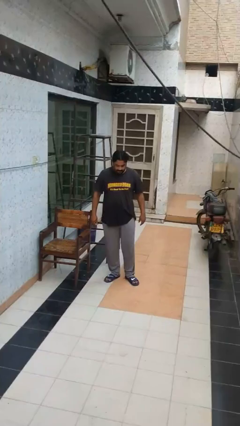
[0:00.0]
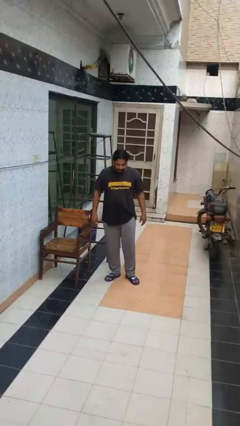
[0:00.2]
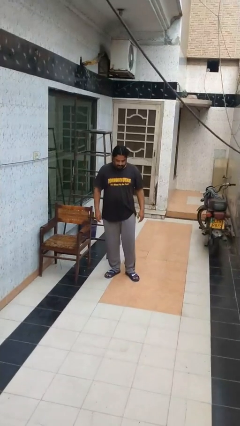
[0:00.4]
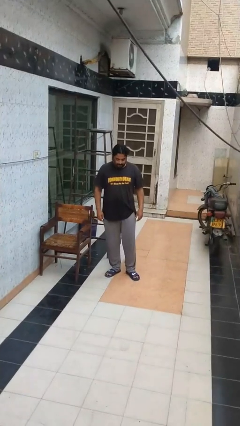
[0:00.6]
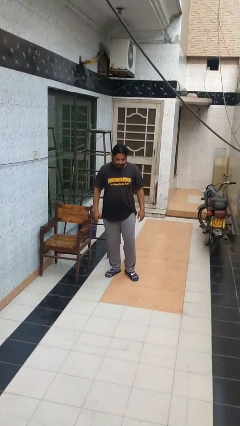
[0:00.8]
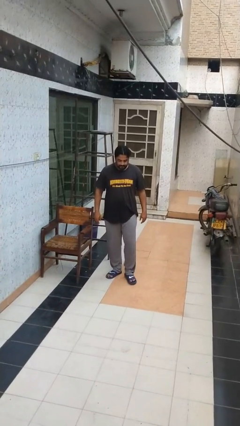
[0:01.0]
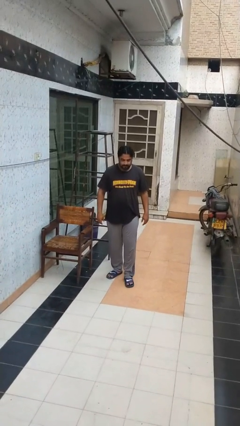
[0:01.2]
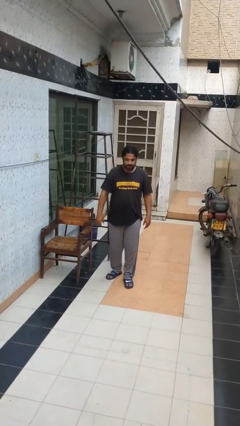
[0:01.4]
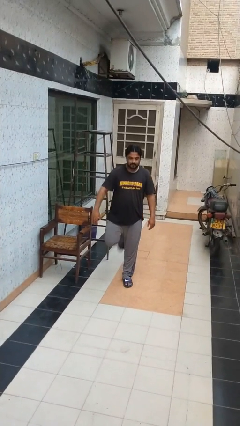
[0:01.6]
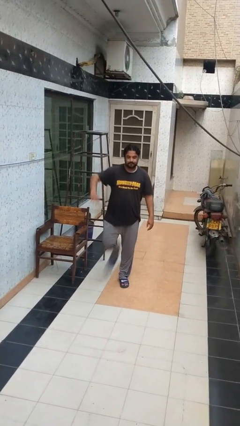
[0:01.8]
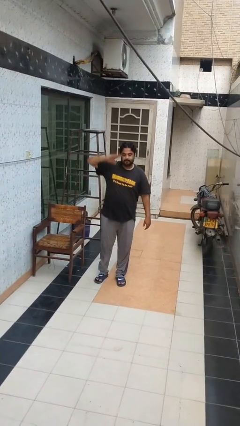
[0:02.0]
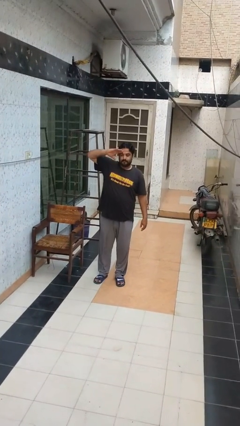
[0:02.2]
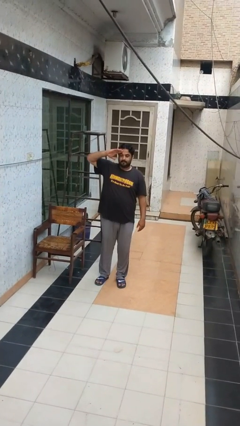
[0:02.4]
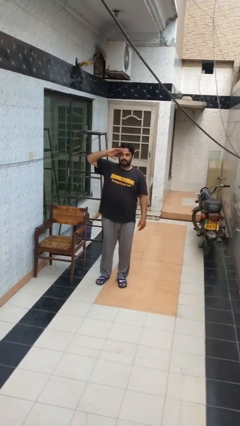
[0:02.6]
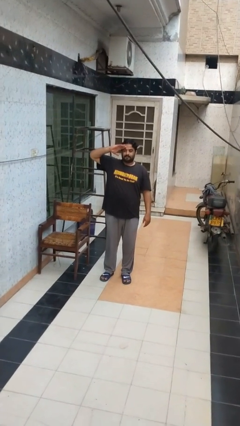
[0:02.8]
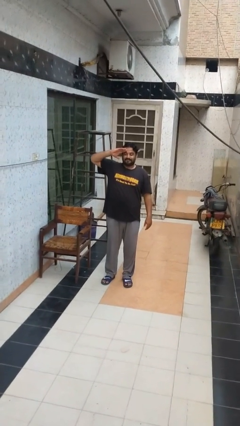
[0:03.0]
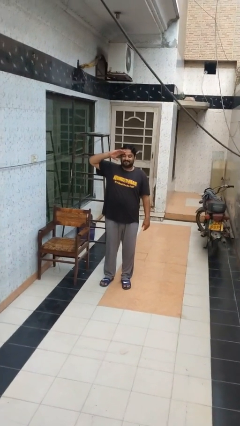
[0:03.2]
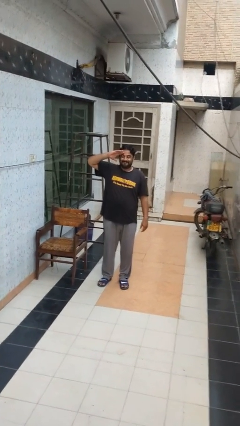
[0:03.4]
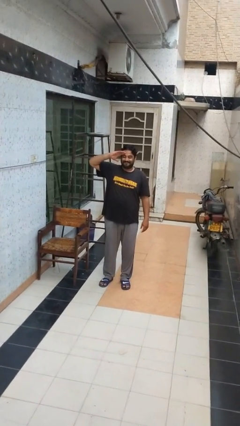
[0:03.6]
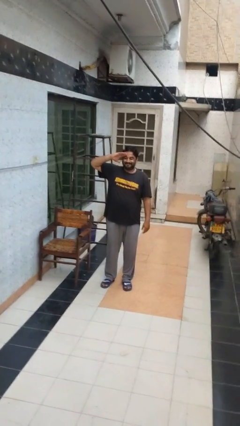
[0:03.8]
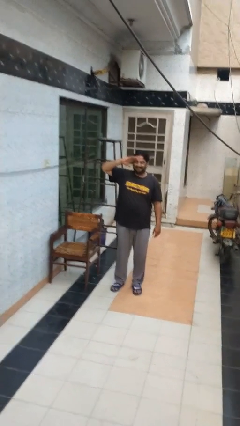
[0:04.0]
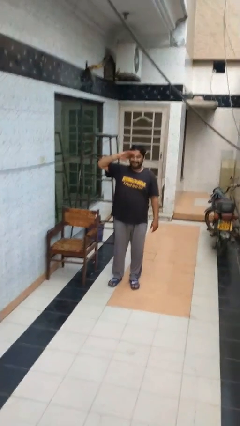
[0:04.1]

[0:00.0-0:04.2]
person salutes

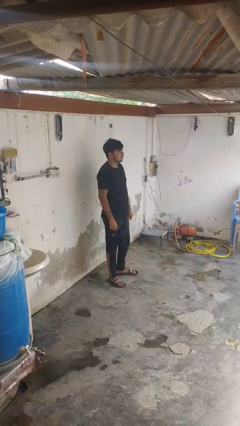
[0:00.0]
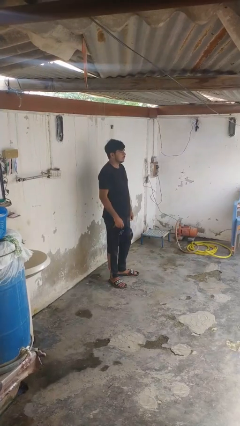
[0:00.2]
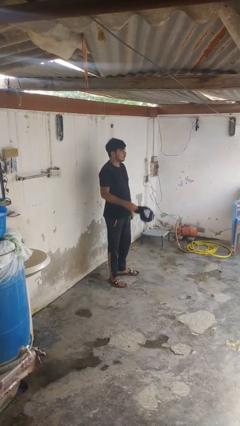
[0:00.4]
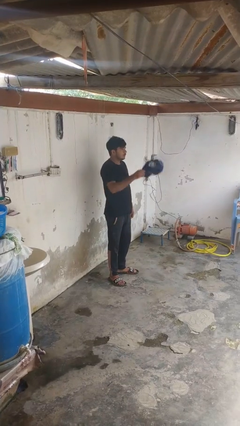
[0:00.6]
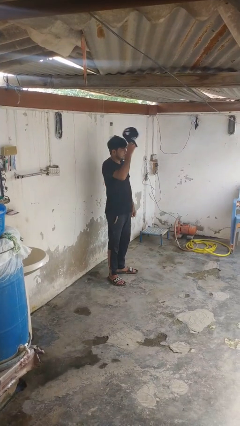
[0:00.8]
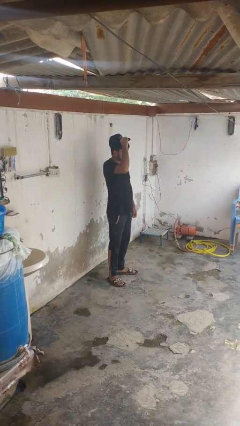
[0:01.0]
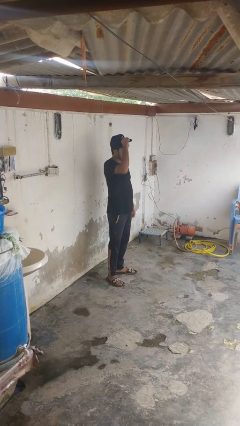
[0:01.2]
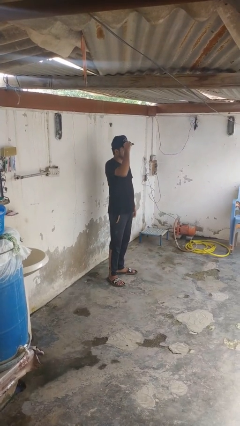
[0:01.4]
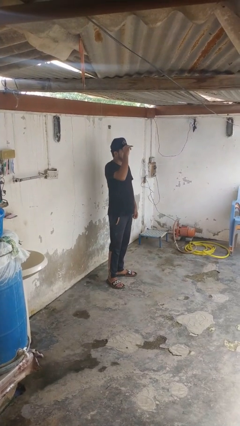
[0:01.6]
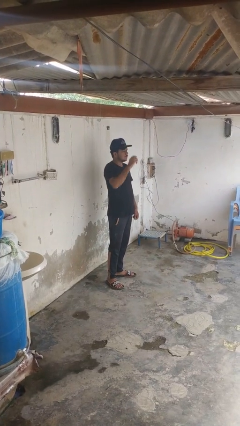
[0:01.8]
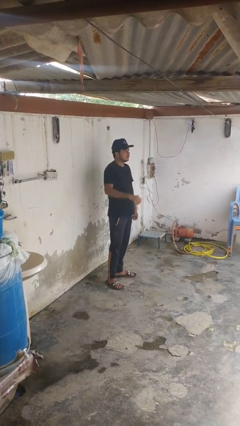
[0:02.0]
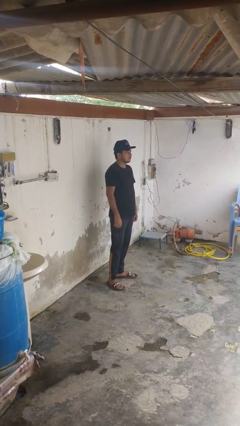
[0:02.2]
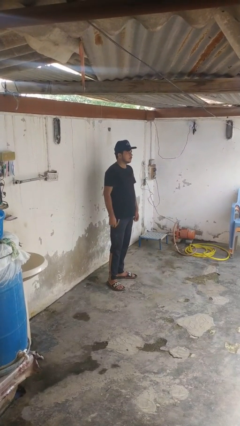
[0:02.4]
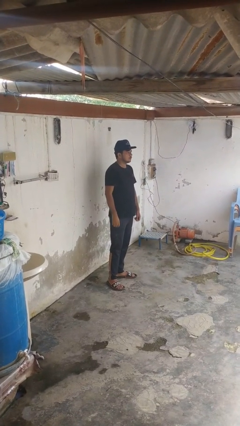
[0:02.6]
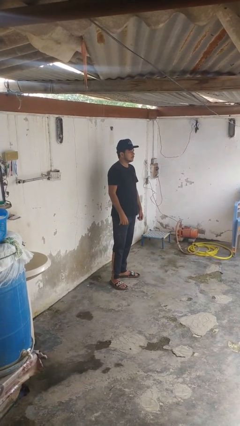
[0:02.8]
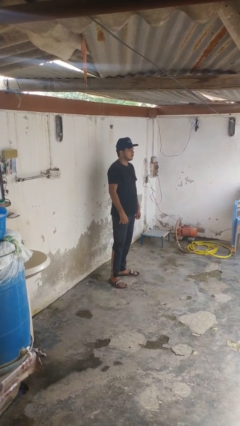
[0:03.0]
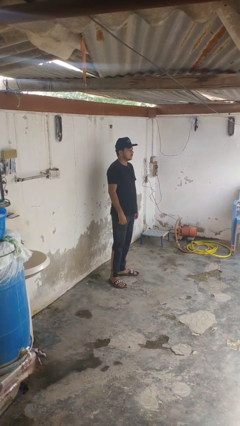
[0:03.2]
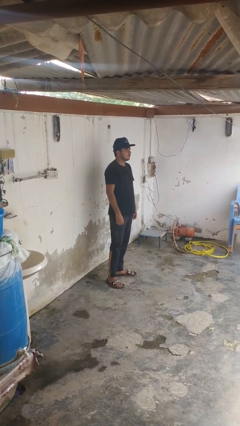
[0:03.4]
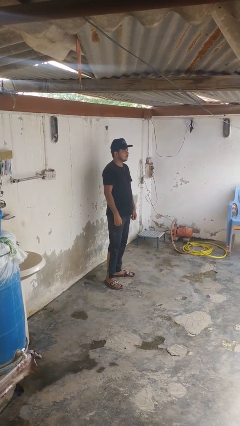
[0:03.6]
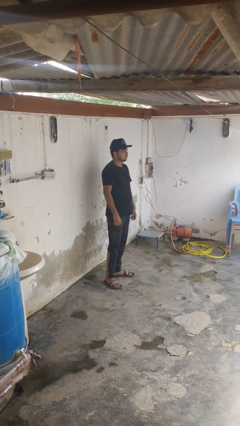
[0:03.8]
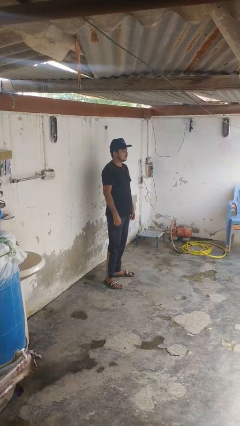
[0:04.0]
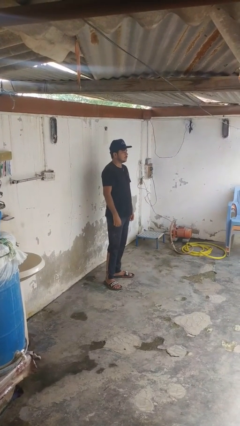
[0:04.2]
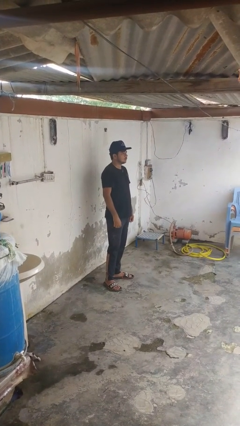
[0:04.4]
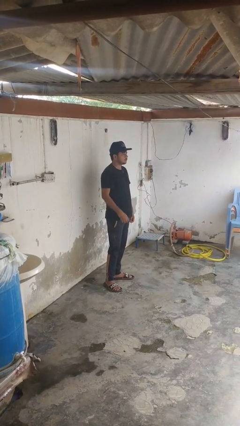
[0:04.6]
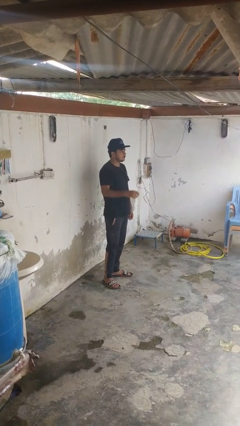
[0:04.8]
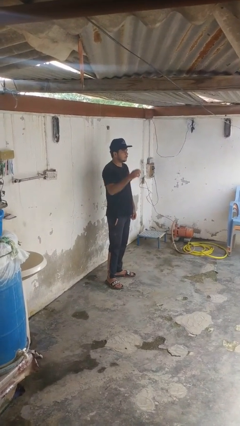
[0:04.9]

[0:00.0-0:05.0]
person puts on hat

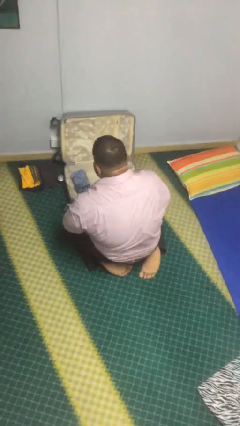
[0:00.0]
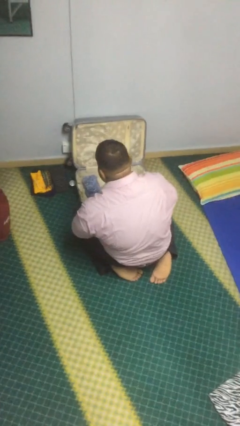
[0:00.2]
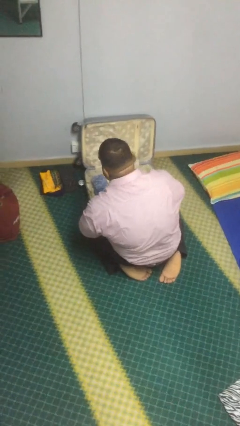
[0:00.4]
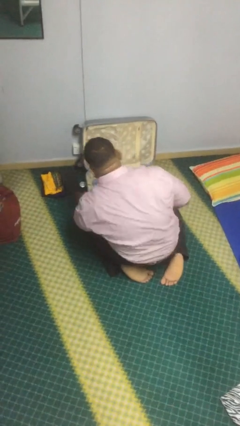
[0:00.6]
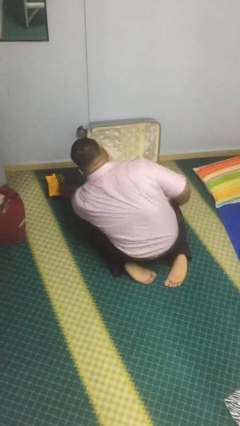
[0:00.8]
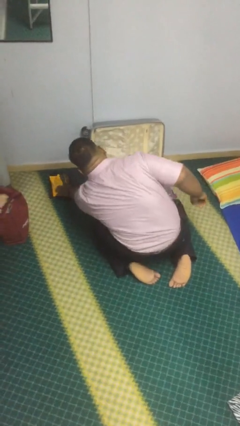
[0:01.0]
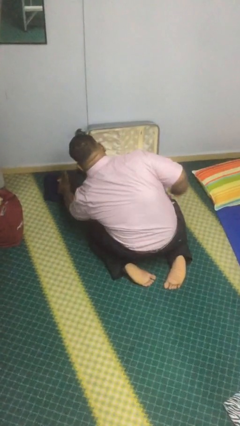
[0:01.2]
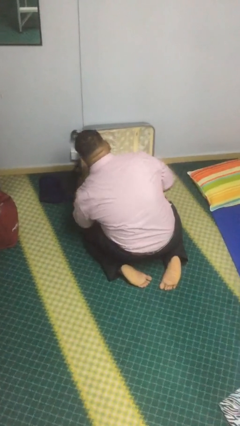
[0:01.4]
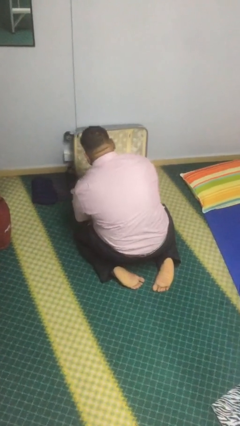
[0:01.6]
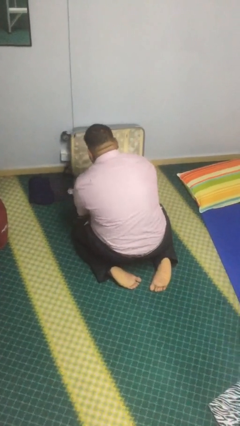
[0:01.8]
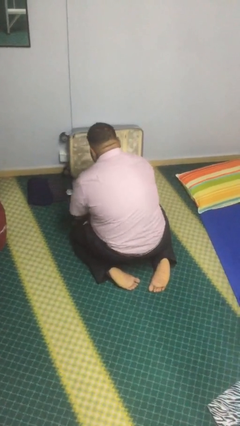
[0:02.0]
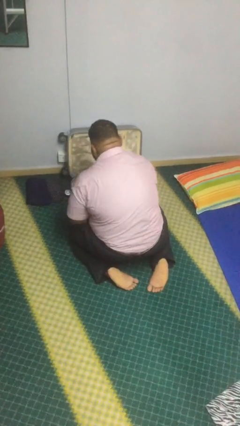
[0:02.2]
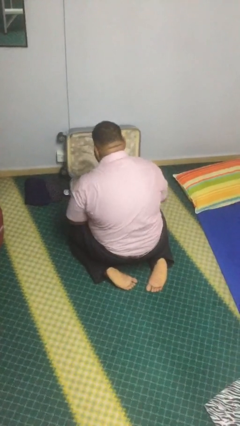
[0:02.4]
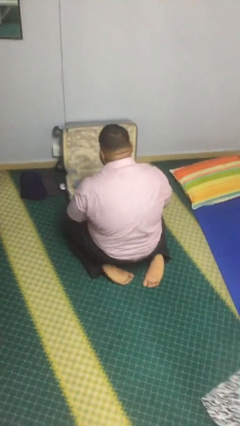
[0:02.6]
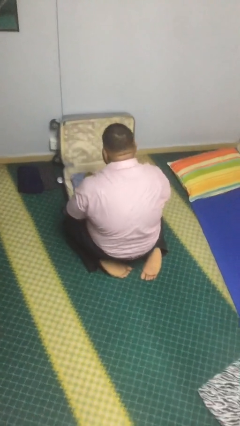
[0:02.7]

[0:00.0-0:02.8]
person loads clothes into suitcase

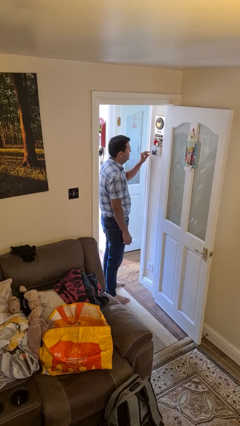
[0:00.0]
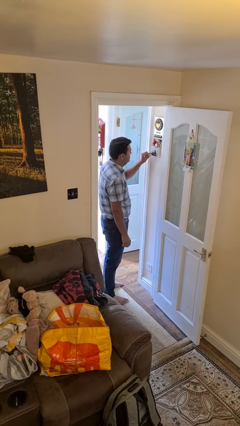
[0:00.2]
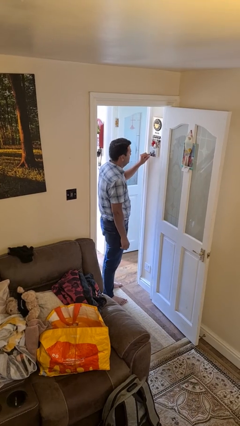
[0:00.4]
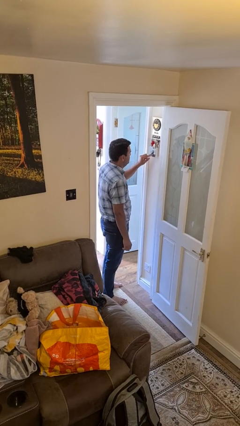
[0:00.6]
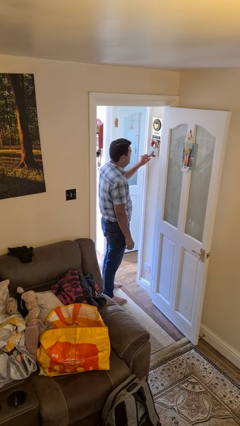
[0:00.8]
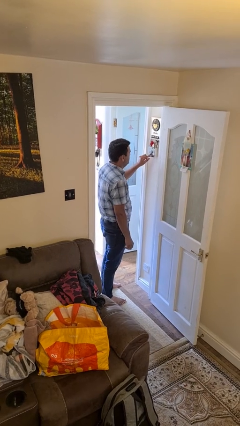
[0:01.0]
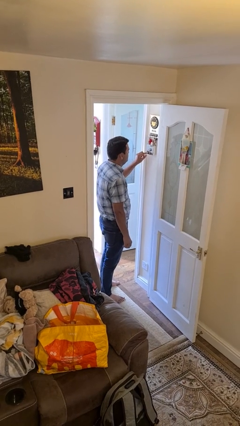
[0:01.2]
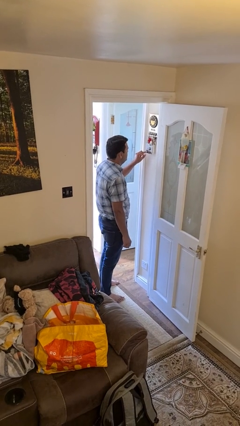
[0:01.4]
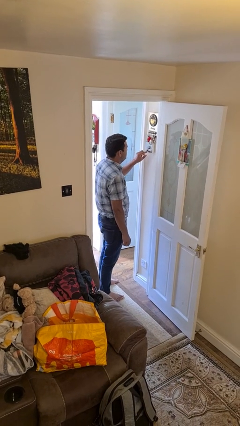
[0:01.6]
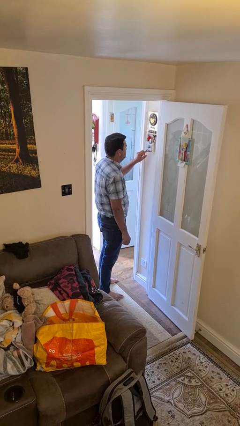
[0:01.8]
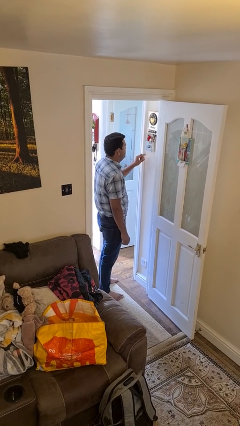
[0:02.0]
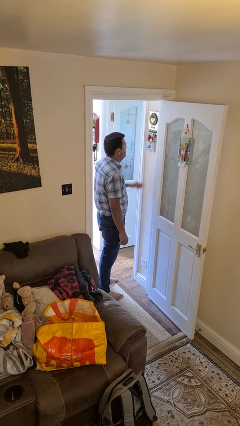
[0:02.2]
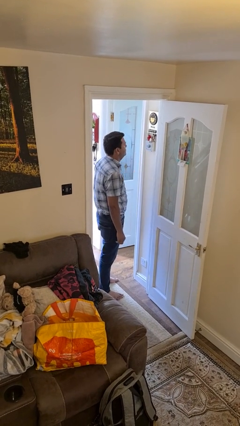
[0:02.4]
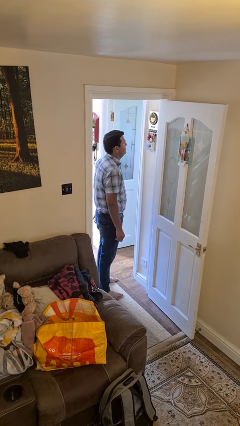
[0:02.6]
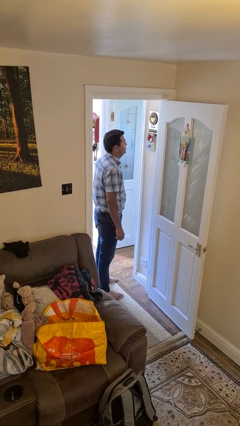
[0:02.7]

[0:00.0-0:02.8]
person adjusts thermostat

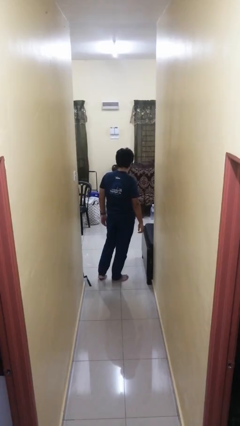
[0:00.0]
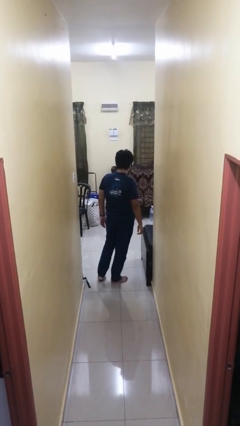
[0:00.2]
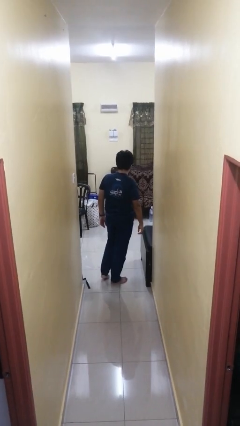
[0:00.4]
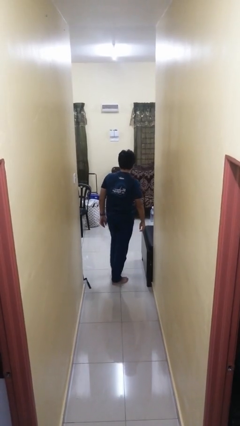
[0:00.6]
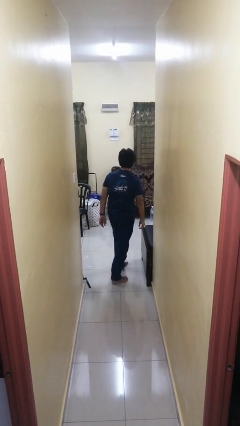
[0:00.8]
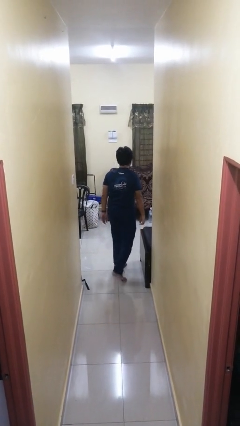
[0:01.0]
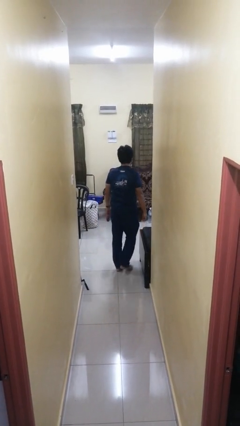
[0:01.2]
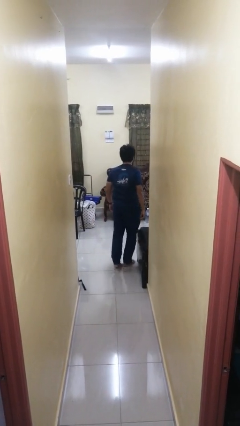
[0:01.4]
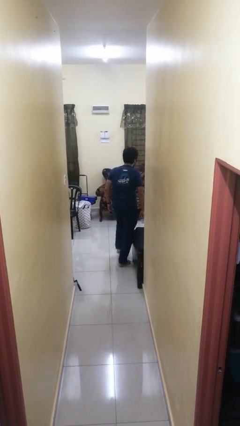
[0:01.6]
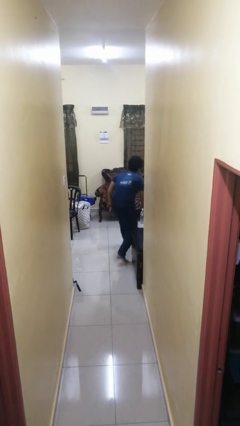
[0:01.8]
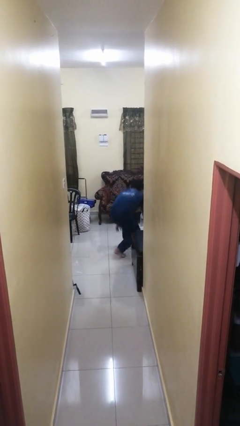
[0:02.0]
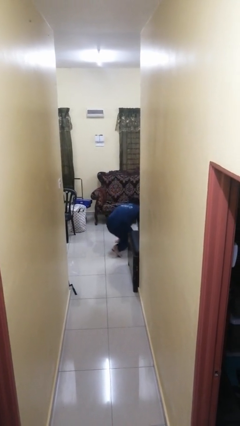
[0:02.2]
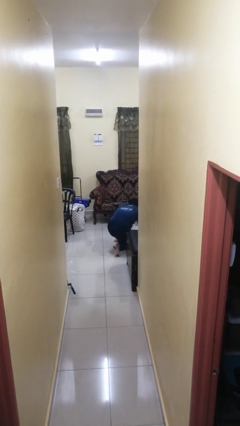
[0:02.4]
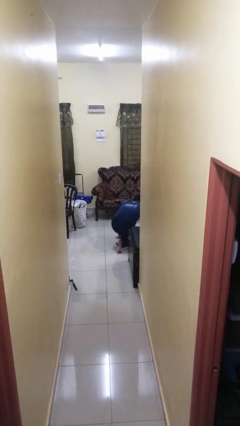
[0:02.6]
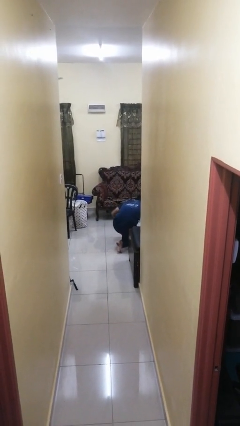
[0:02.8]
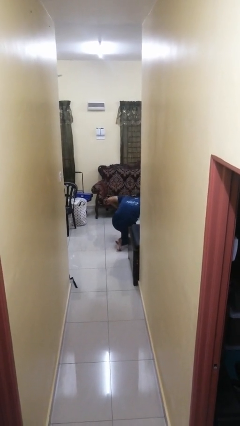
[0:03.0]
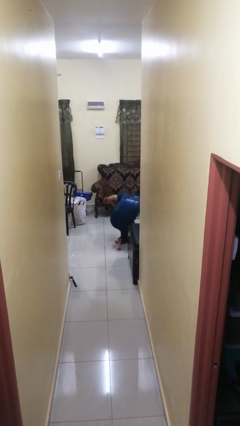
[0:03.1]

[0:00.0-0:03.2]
person trips on object on floor
